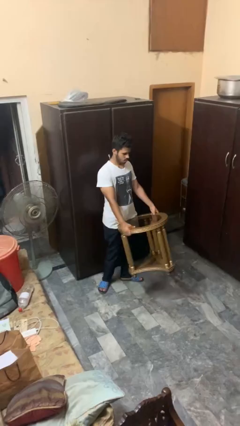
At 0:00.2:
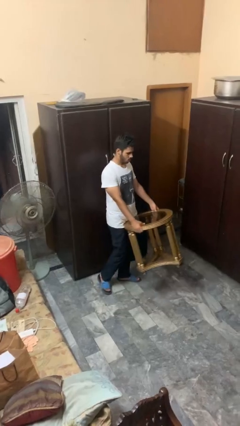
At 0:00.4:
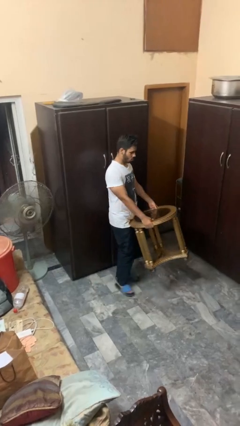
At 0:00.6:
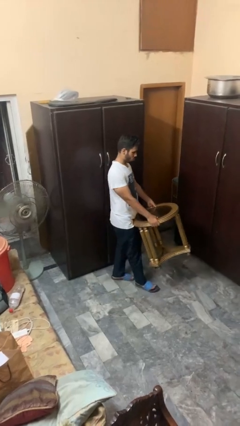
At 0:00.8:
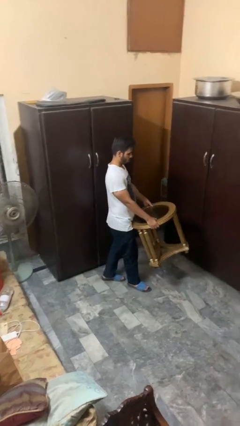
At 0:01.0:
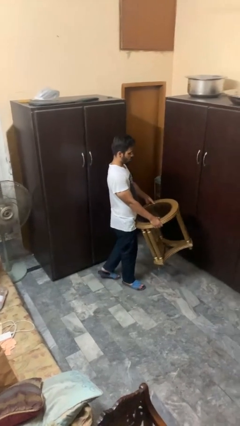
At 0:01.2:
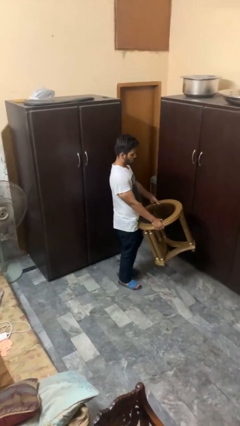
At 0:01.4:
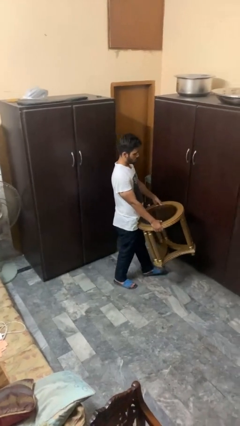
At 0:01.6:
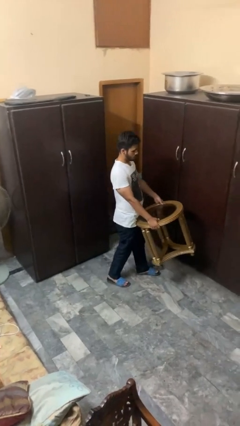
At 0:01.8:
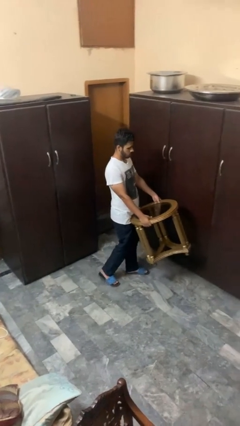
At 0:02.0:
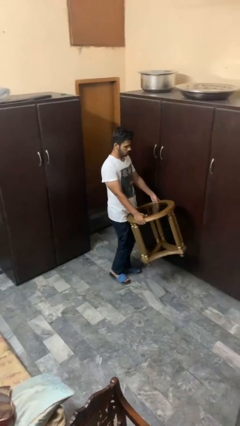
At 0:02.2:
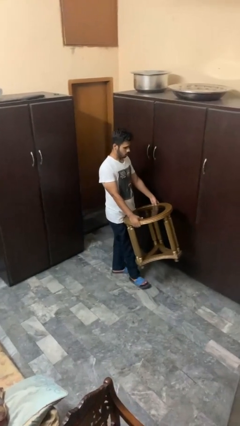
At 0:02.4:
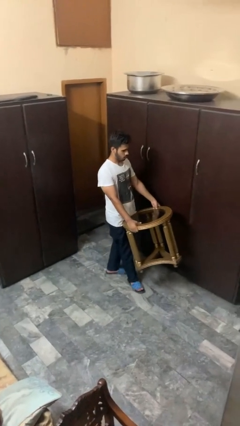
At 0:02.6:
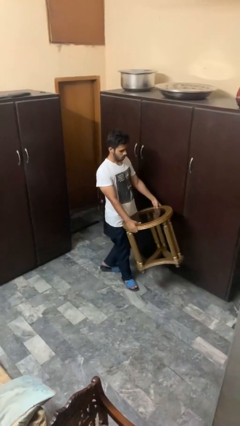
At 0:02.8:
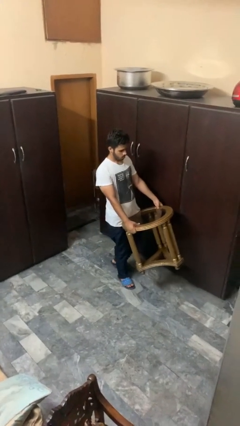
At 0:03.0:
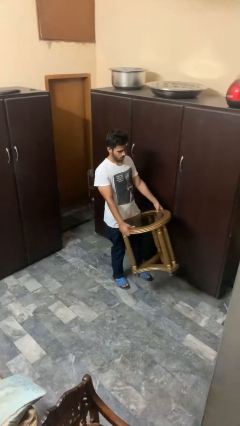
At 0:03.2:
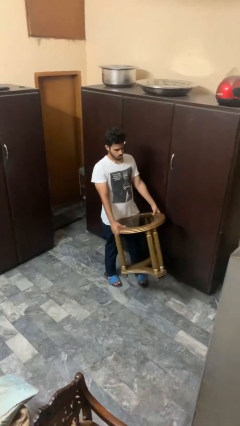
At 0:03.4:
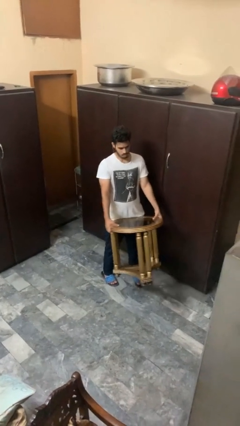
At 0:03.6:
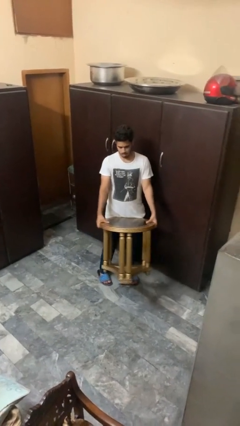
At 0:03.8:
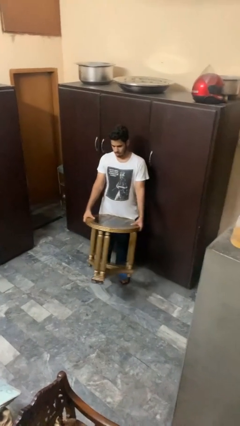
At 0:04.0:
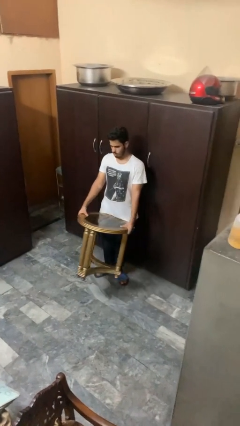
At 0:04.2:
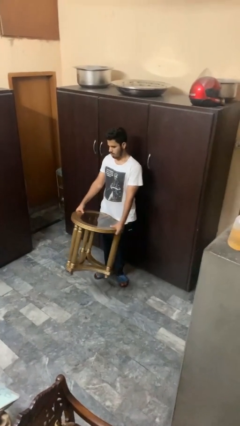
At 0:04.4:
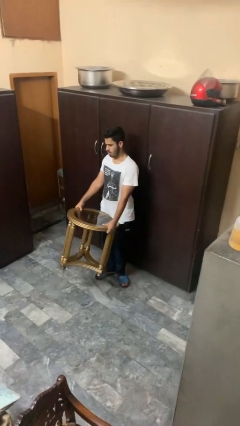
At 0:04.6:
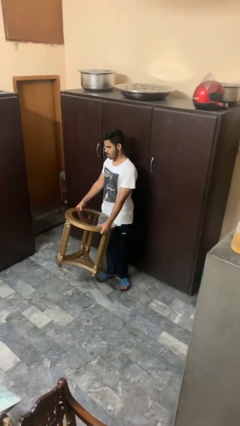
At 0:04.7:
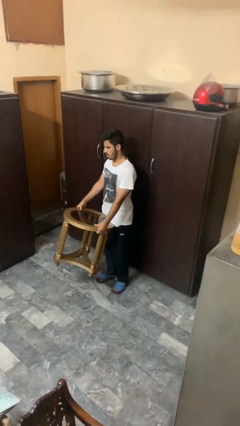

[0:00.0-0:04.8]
person carries furniture

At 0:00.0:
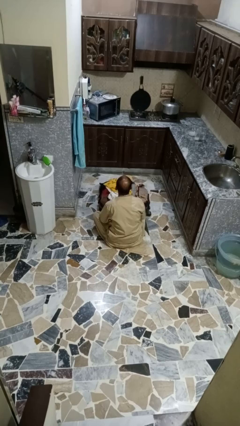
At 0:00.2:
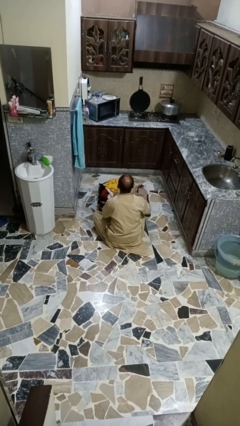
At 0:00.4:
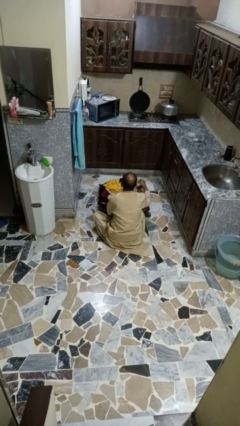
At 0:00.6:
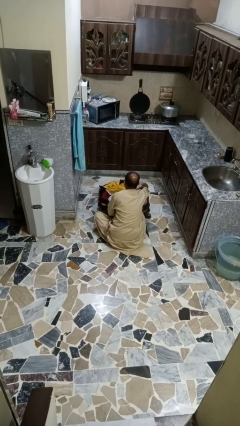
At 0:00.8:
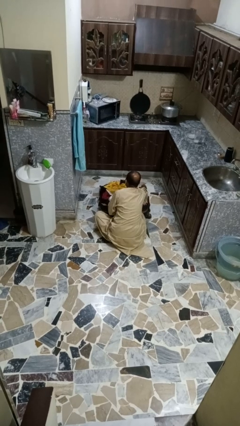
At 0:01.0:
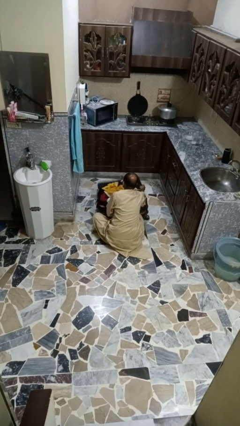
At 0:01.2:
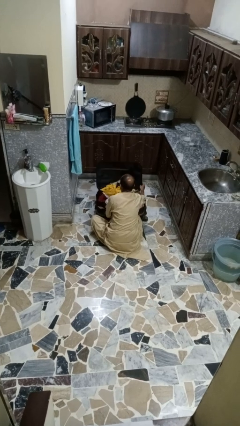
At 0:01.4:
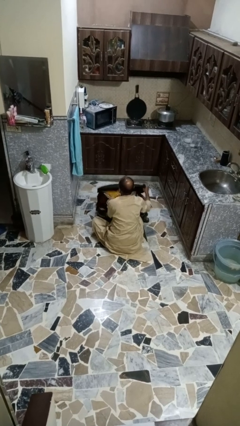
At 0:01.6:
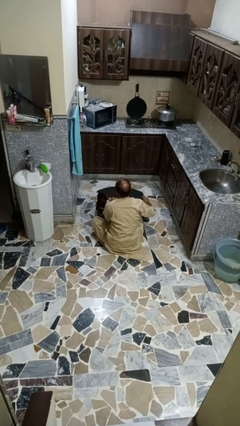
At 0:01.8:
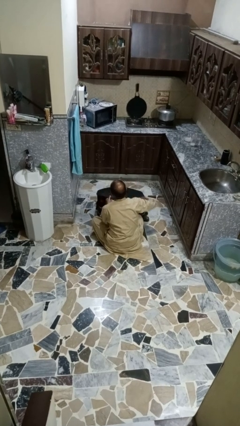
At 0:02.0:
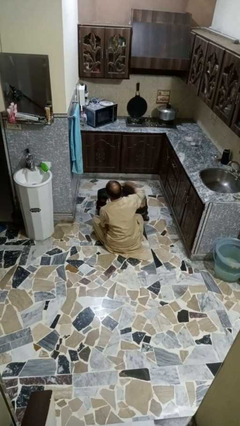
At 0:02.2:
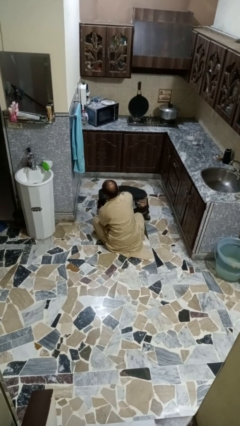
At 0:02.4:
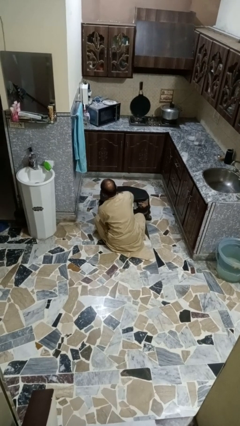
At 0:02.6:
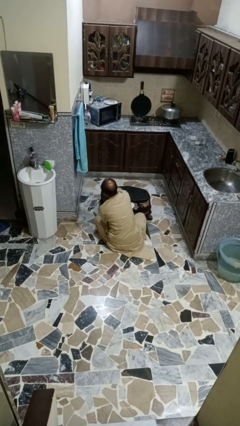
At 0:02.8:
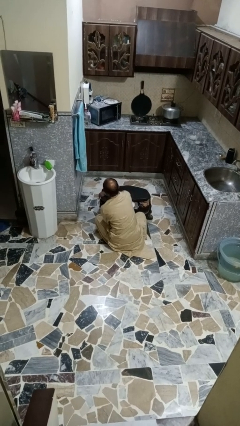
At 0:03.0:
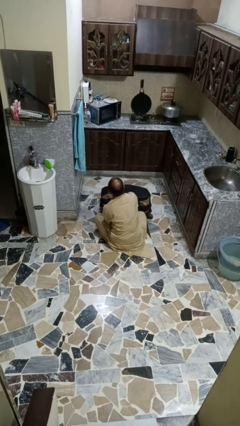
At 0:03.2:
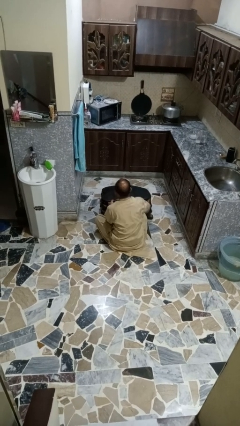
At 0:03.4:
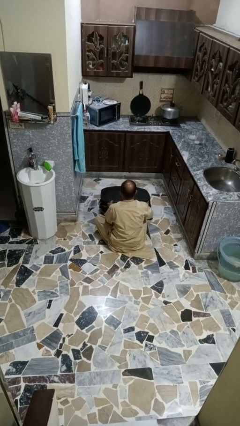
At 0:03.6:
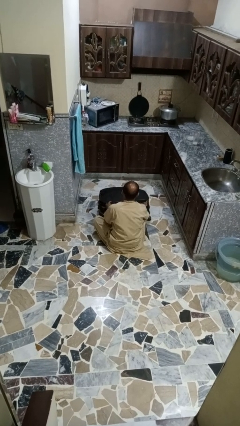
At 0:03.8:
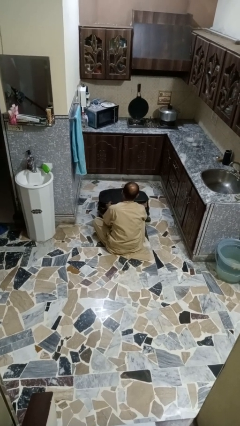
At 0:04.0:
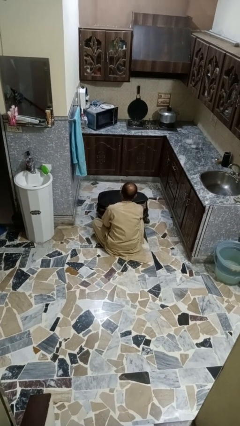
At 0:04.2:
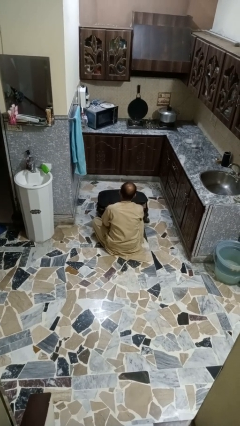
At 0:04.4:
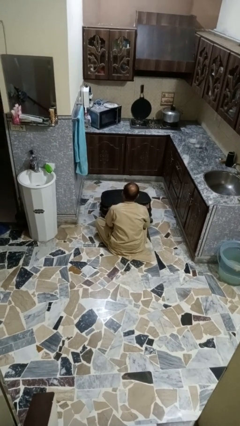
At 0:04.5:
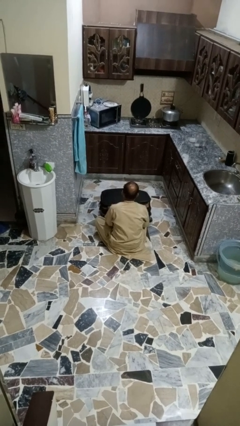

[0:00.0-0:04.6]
person closes suitcase

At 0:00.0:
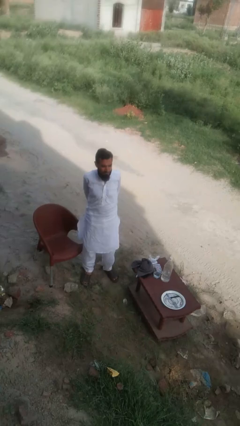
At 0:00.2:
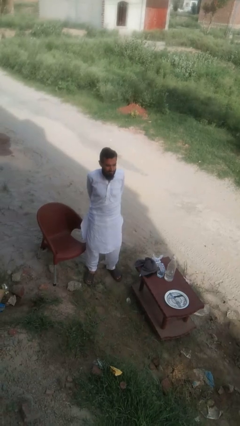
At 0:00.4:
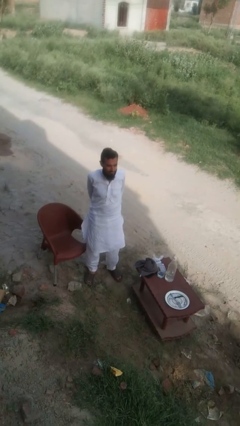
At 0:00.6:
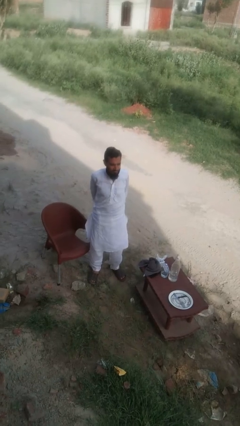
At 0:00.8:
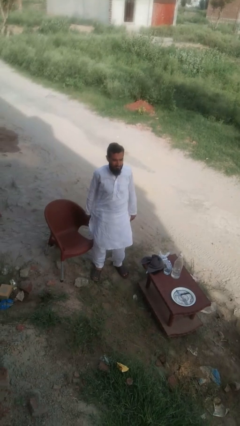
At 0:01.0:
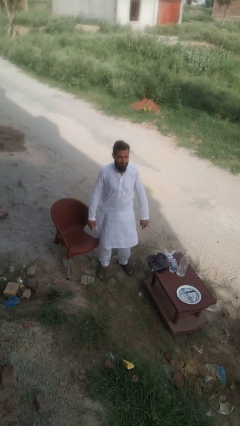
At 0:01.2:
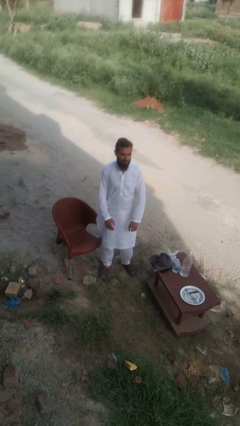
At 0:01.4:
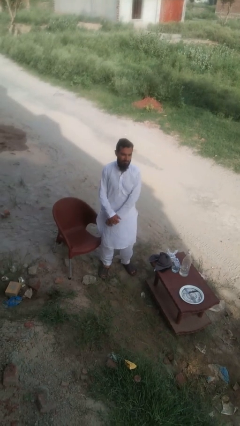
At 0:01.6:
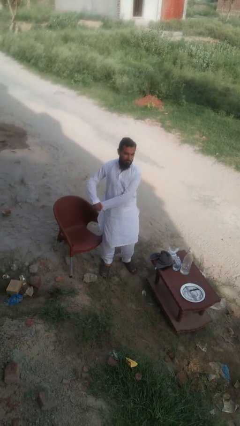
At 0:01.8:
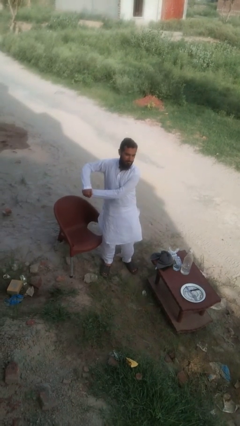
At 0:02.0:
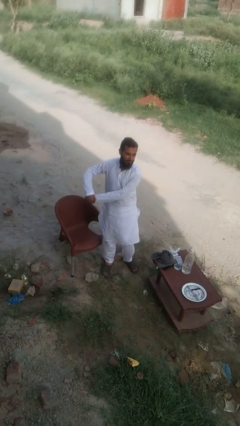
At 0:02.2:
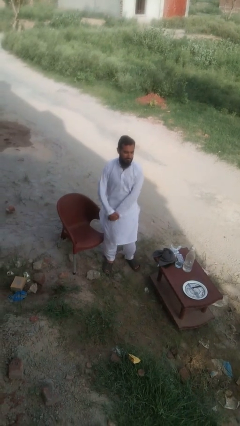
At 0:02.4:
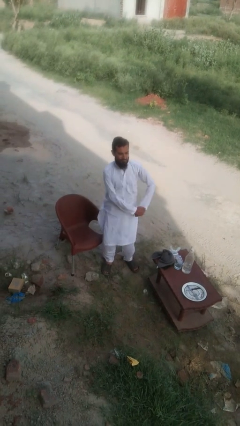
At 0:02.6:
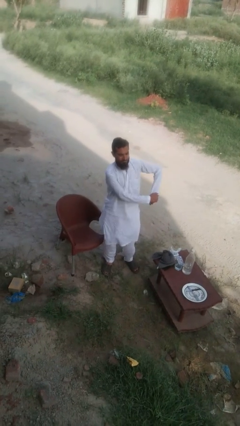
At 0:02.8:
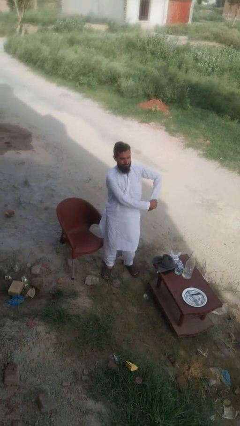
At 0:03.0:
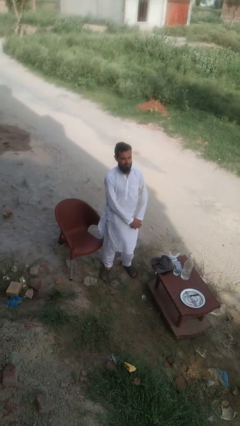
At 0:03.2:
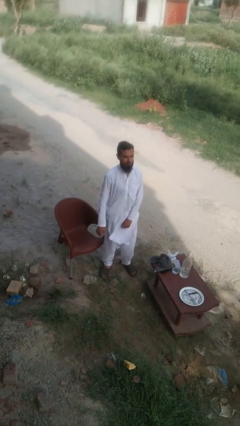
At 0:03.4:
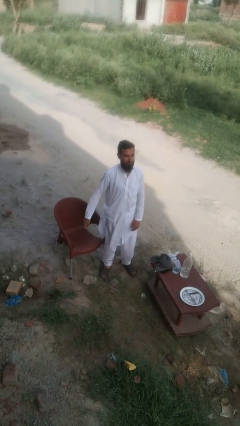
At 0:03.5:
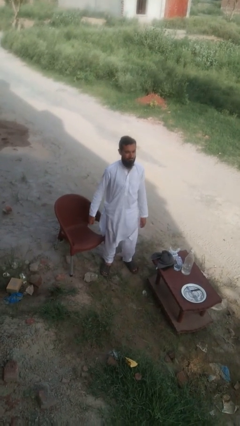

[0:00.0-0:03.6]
person stretches arms to side

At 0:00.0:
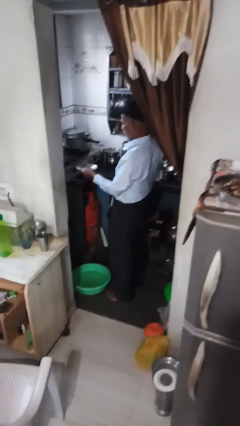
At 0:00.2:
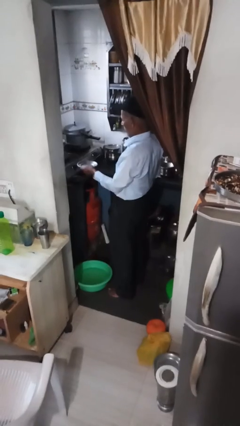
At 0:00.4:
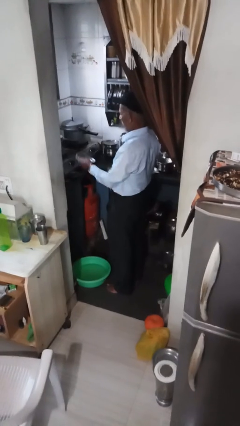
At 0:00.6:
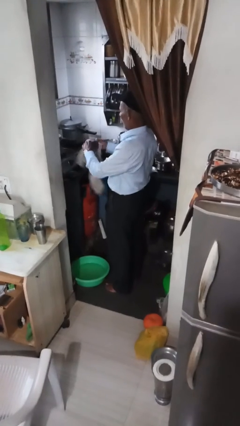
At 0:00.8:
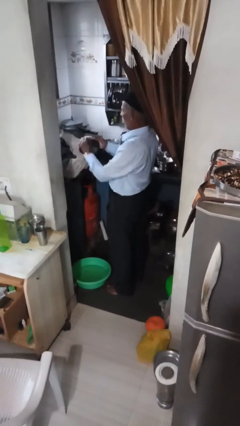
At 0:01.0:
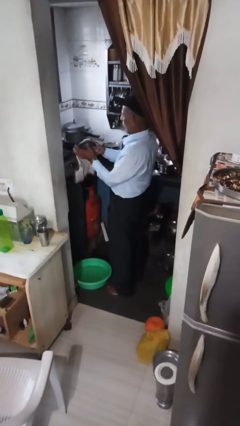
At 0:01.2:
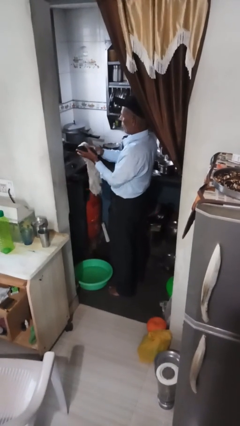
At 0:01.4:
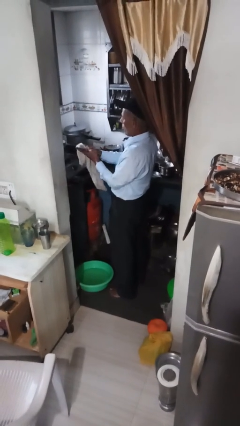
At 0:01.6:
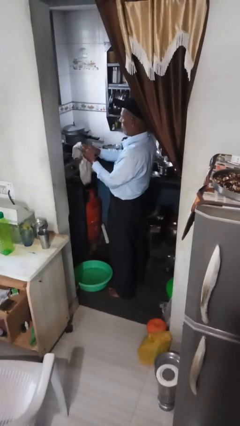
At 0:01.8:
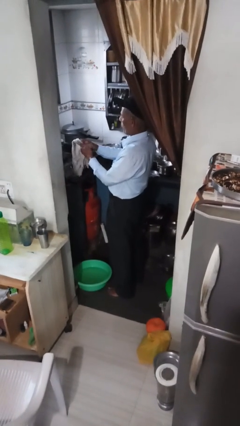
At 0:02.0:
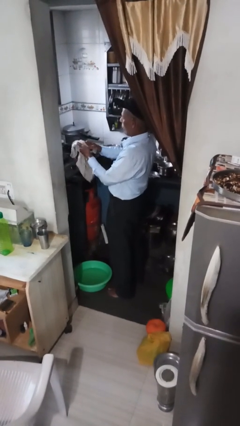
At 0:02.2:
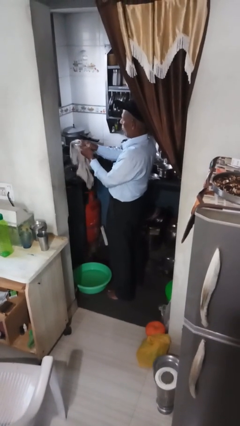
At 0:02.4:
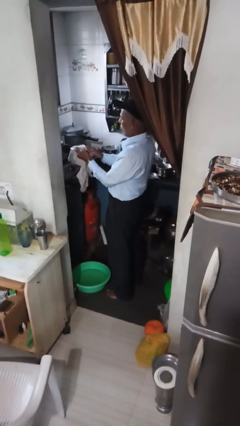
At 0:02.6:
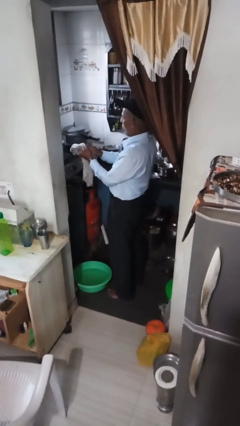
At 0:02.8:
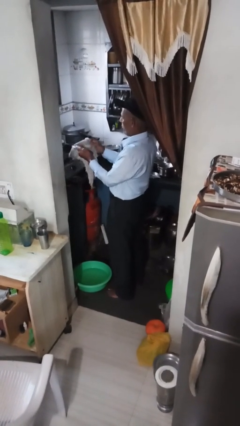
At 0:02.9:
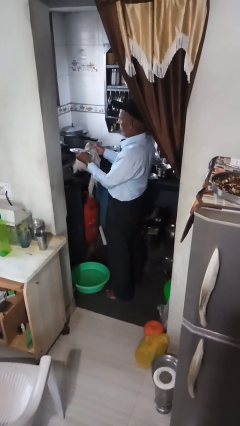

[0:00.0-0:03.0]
person dries dish

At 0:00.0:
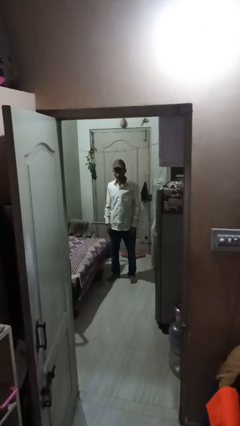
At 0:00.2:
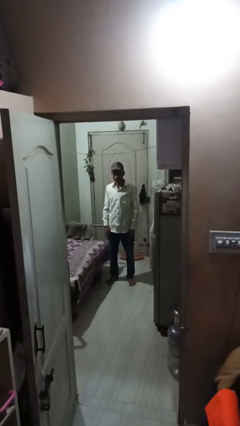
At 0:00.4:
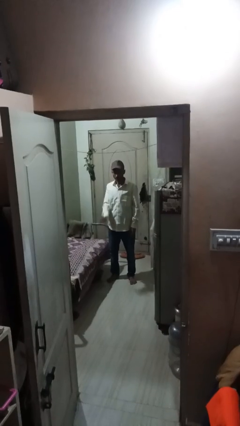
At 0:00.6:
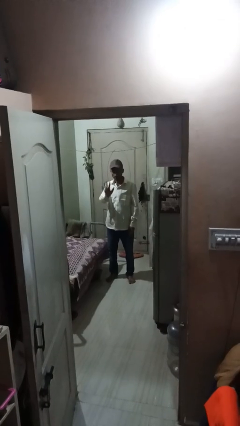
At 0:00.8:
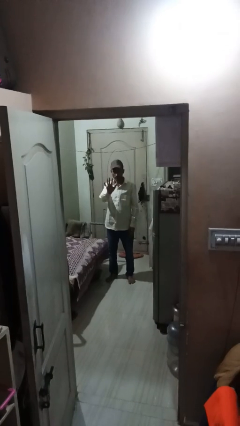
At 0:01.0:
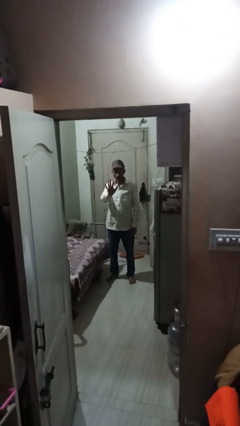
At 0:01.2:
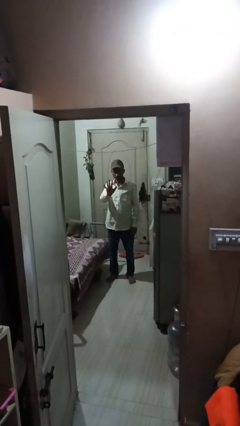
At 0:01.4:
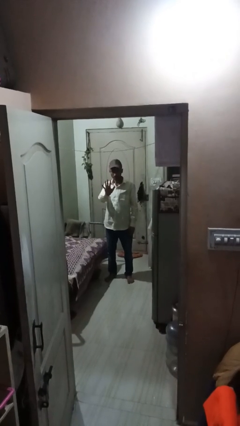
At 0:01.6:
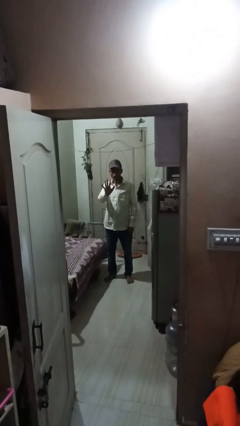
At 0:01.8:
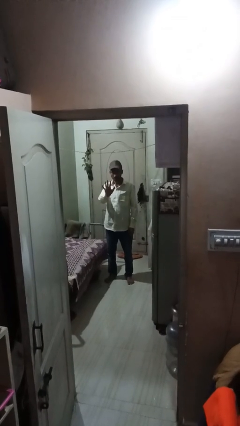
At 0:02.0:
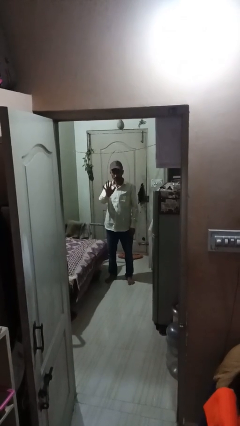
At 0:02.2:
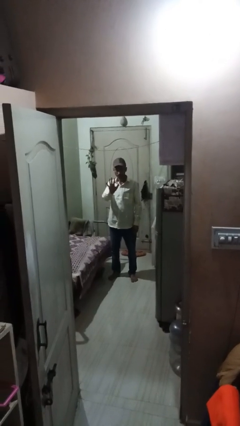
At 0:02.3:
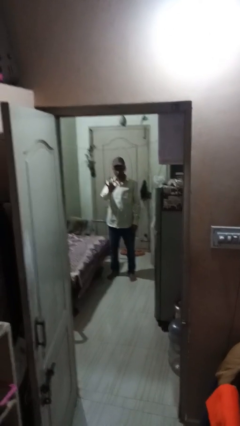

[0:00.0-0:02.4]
person gestures number five
